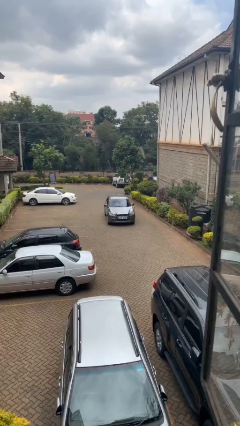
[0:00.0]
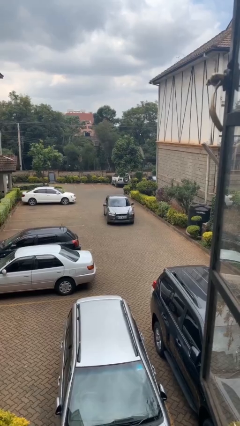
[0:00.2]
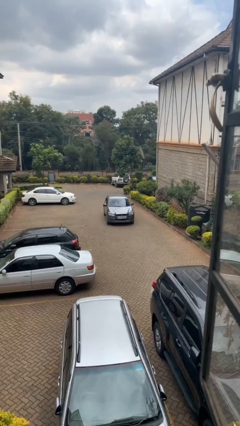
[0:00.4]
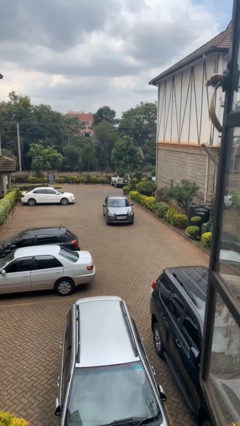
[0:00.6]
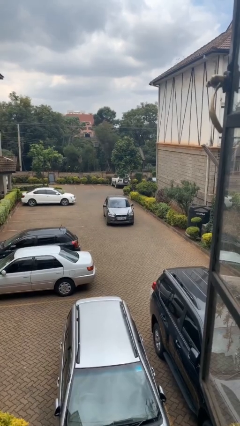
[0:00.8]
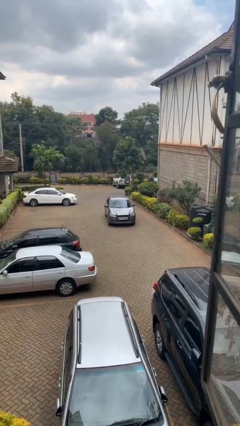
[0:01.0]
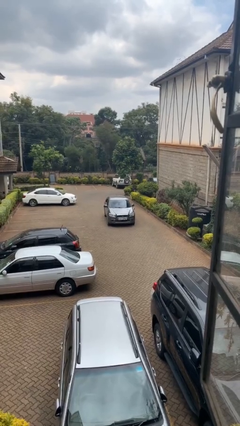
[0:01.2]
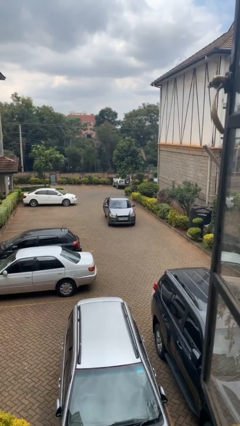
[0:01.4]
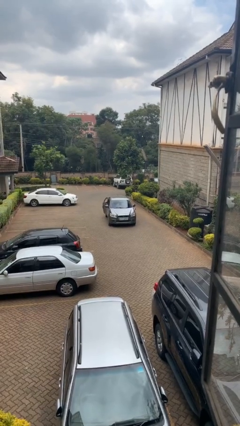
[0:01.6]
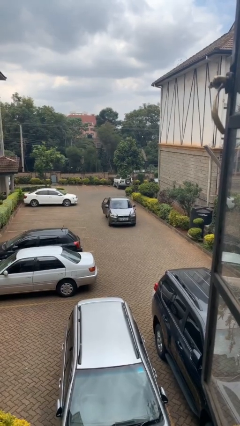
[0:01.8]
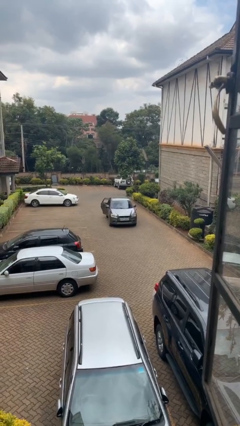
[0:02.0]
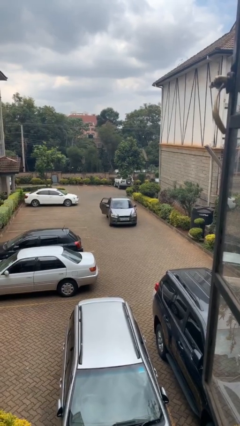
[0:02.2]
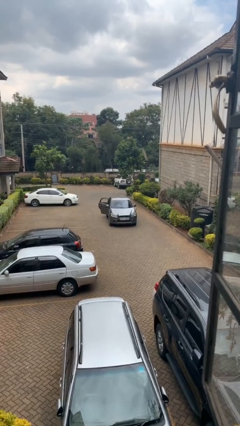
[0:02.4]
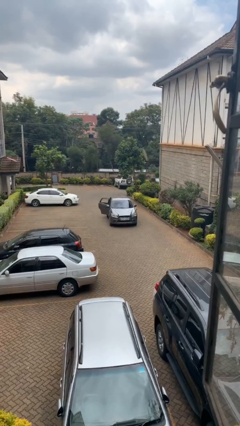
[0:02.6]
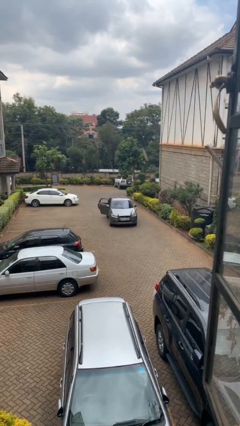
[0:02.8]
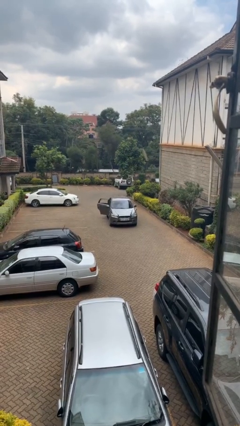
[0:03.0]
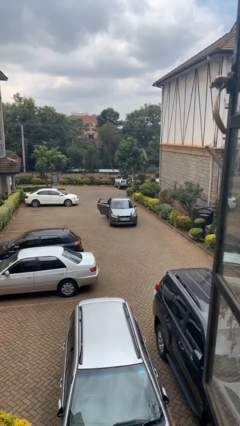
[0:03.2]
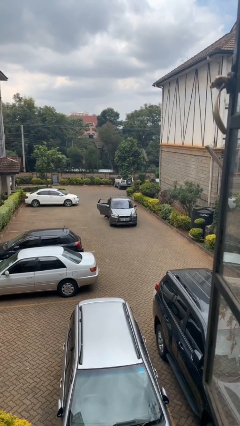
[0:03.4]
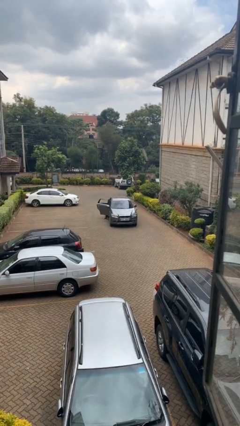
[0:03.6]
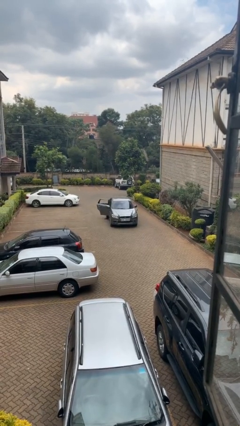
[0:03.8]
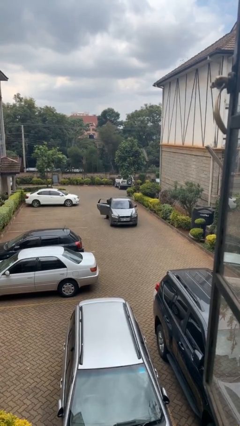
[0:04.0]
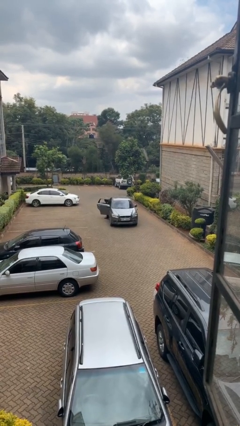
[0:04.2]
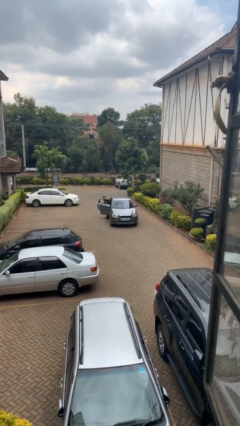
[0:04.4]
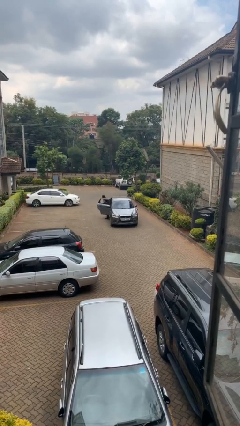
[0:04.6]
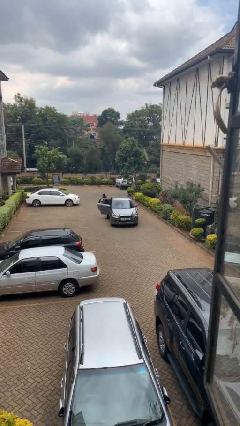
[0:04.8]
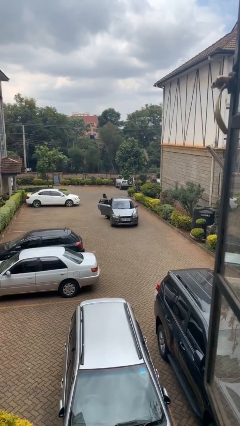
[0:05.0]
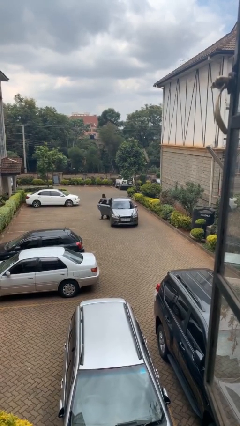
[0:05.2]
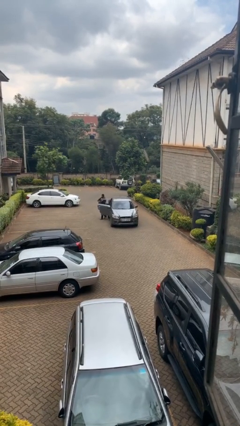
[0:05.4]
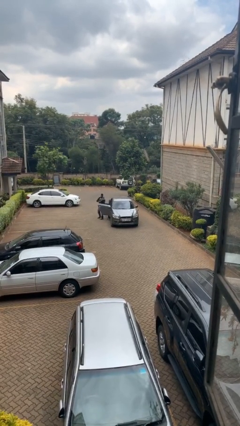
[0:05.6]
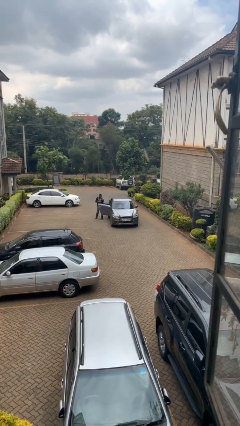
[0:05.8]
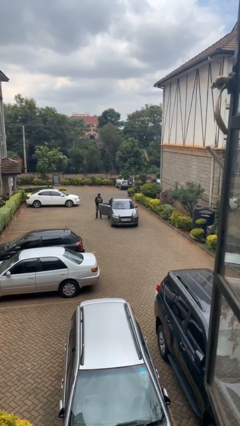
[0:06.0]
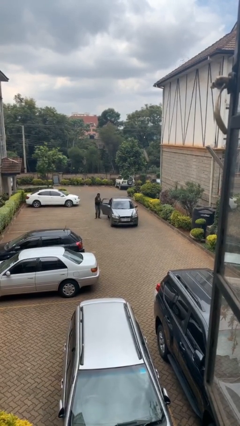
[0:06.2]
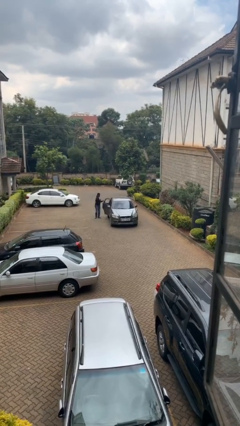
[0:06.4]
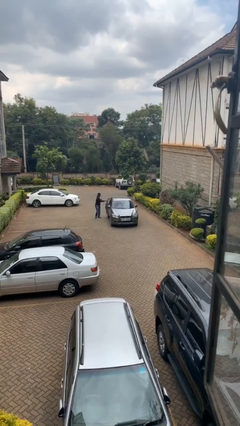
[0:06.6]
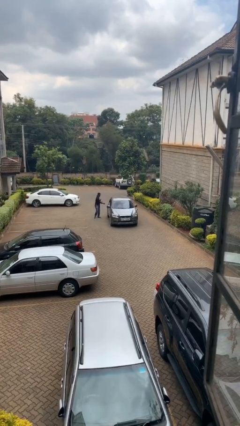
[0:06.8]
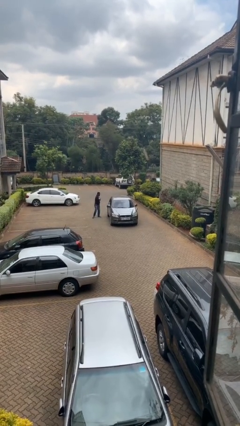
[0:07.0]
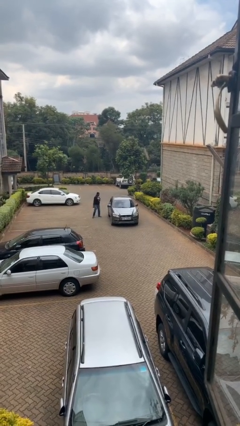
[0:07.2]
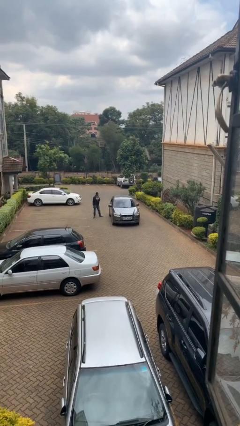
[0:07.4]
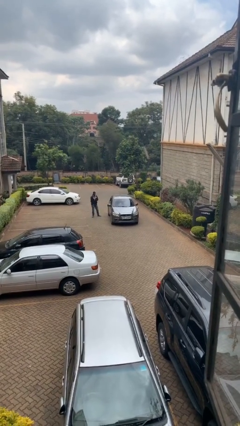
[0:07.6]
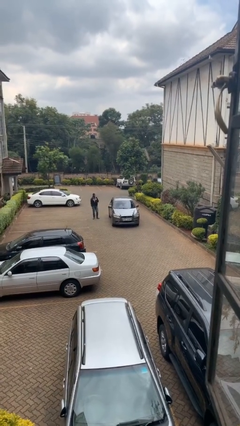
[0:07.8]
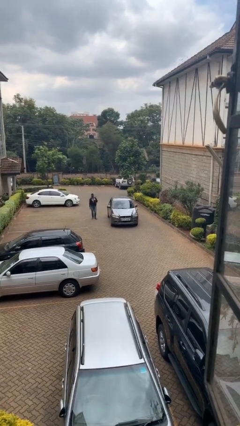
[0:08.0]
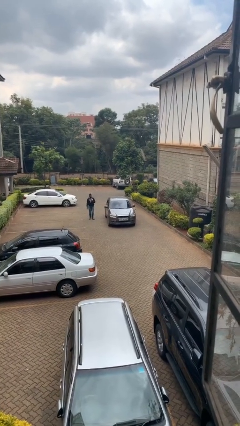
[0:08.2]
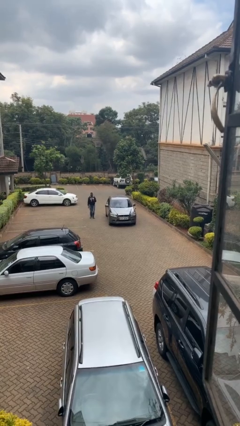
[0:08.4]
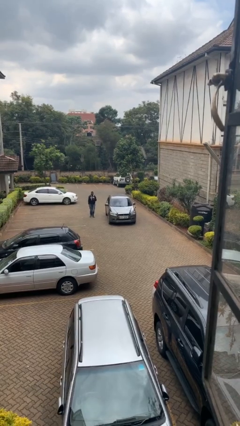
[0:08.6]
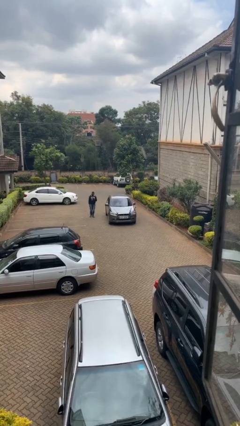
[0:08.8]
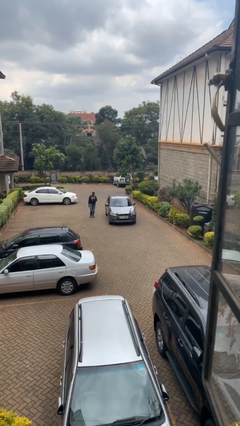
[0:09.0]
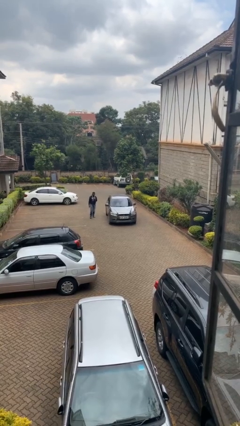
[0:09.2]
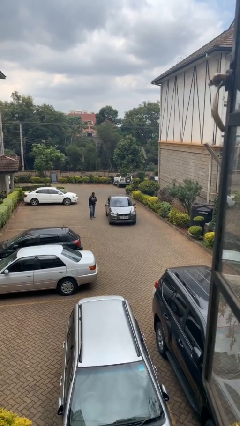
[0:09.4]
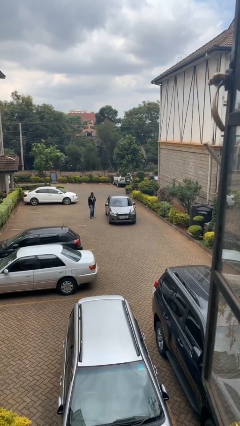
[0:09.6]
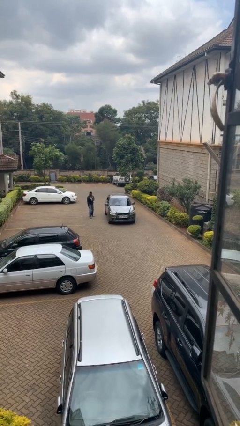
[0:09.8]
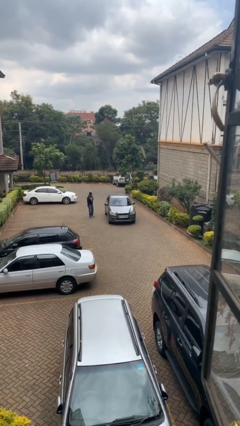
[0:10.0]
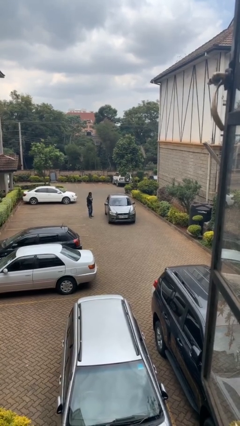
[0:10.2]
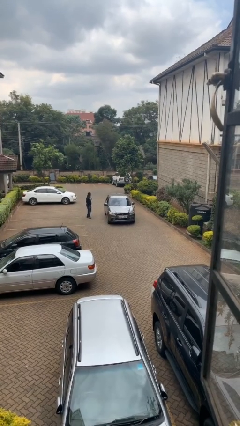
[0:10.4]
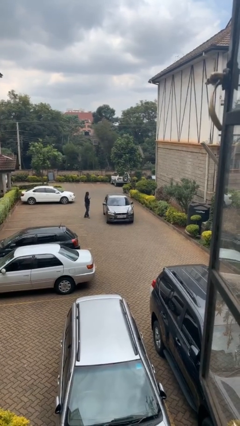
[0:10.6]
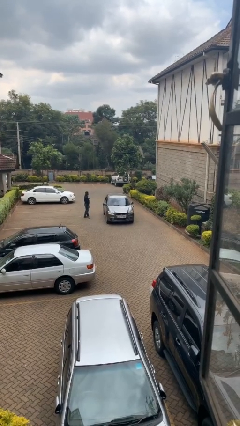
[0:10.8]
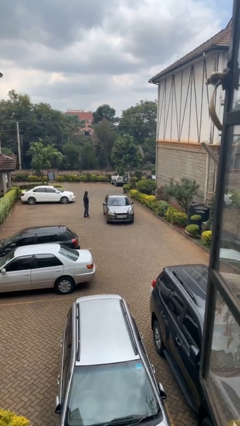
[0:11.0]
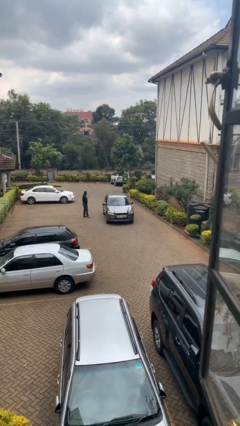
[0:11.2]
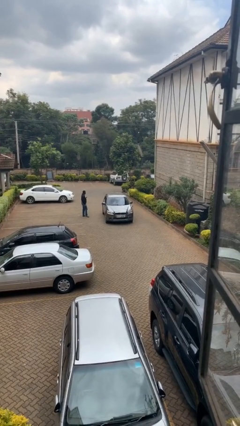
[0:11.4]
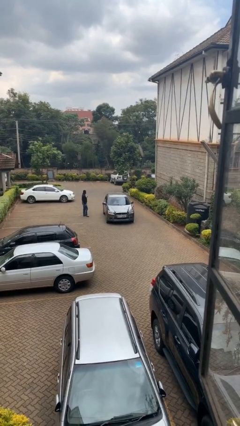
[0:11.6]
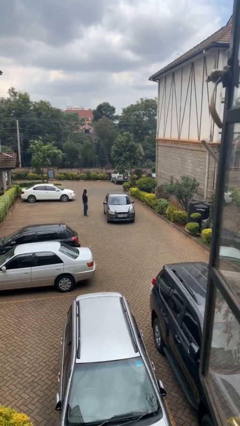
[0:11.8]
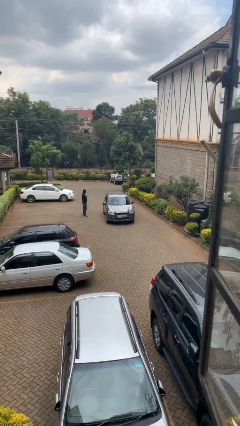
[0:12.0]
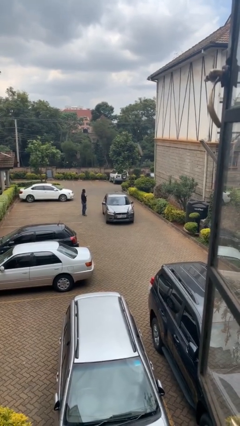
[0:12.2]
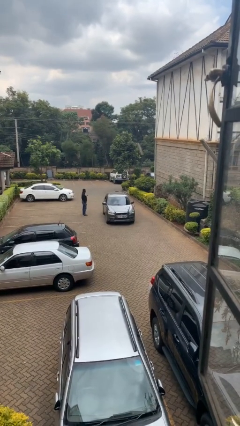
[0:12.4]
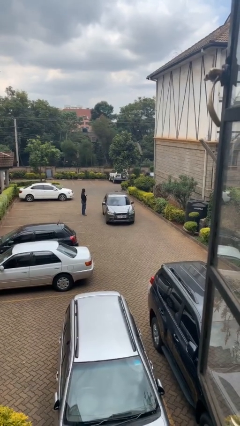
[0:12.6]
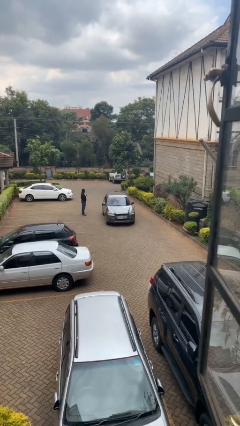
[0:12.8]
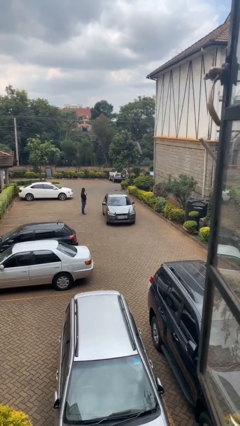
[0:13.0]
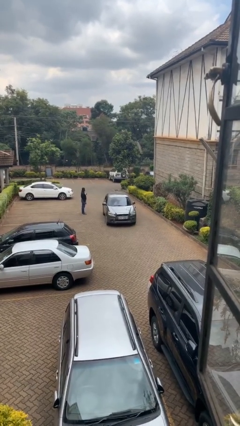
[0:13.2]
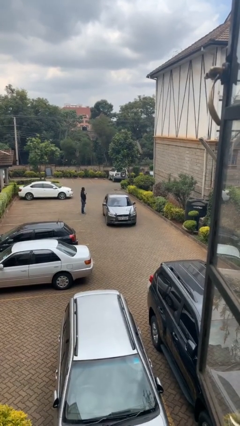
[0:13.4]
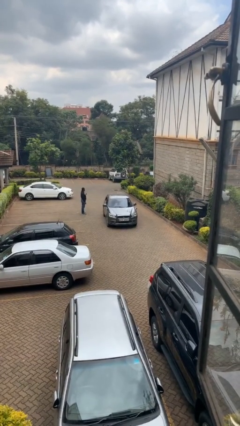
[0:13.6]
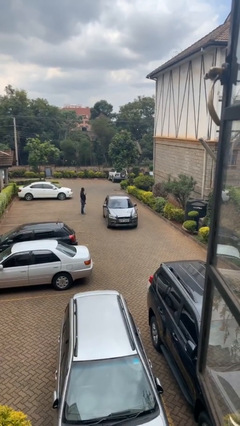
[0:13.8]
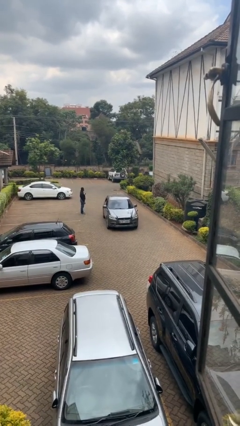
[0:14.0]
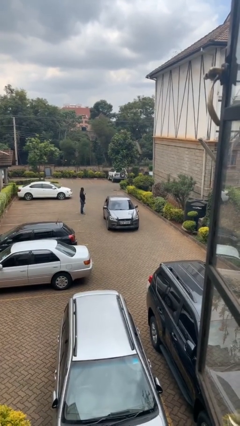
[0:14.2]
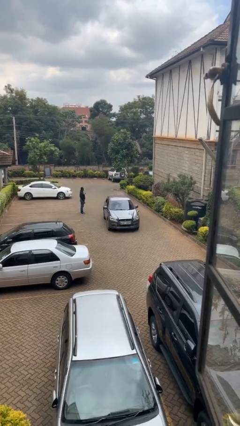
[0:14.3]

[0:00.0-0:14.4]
car drops off person

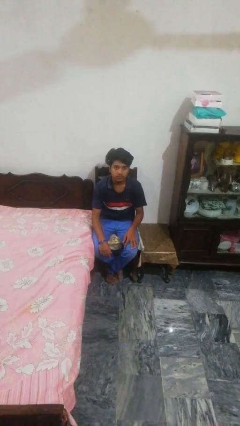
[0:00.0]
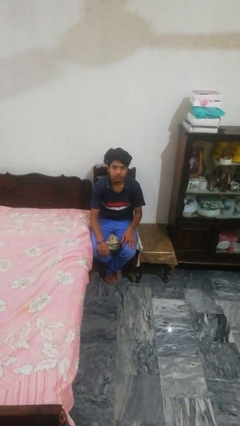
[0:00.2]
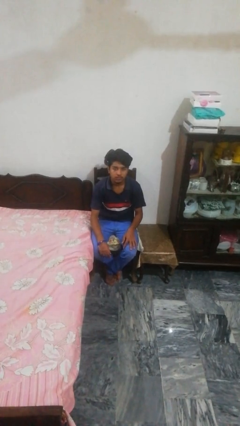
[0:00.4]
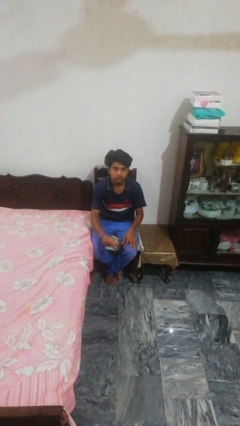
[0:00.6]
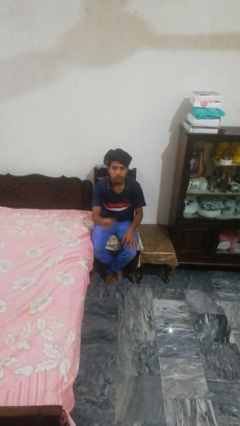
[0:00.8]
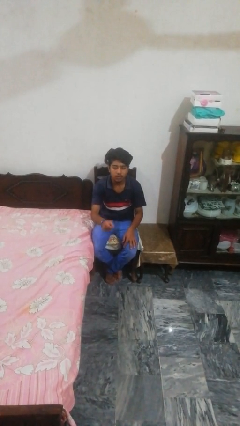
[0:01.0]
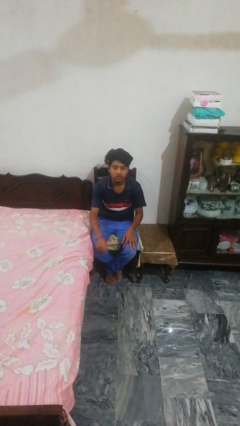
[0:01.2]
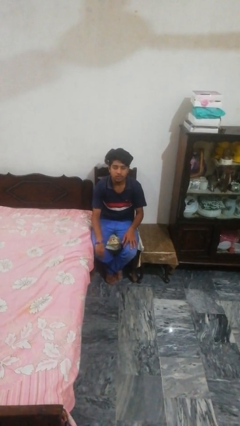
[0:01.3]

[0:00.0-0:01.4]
person snaps fingers

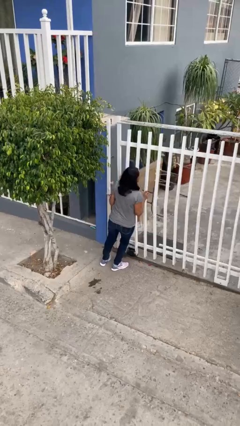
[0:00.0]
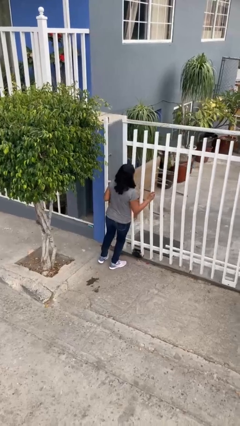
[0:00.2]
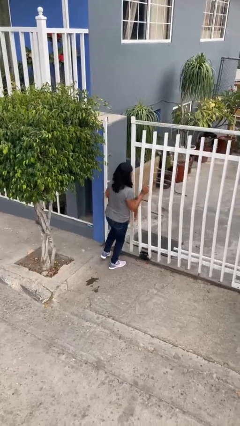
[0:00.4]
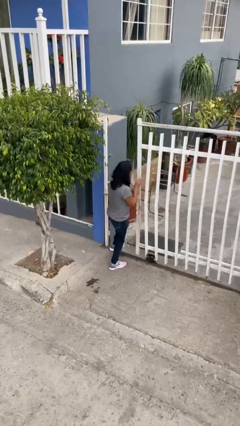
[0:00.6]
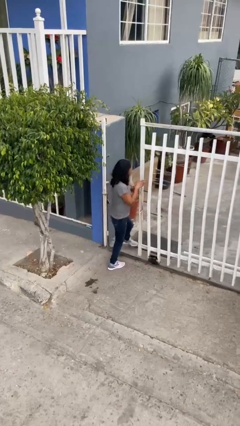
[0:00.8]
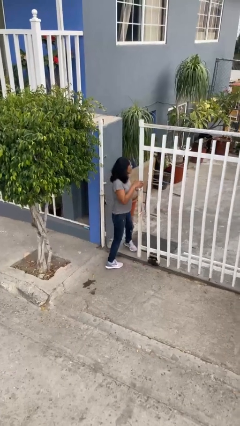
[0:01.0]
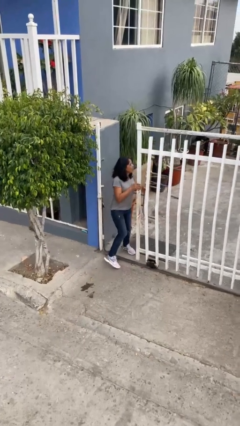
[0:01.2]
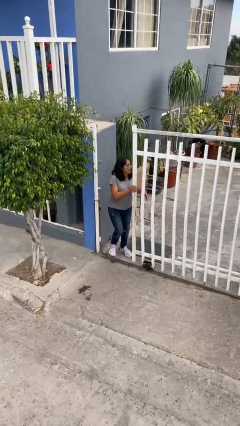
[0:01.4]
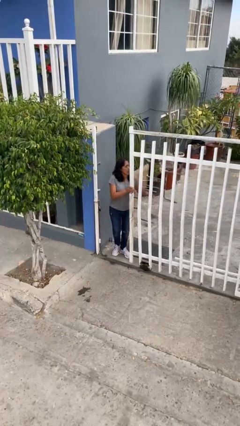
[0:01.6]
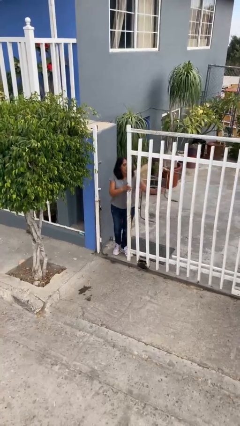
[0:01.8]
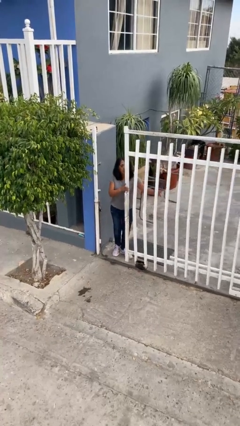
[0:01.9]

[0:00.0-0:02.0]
person opens facility door
